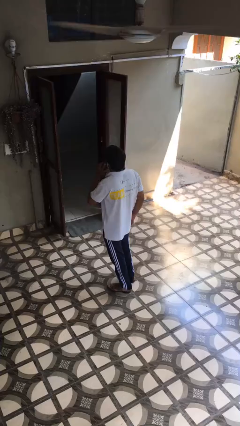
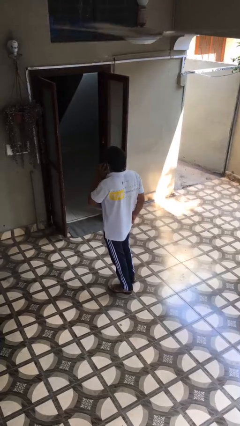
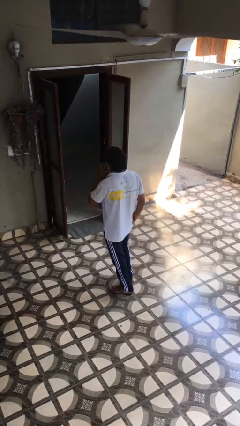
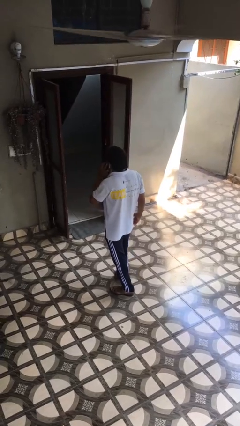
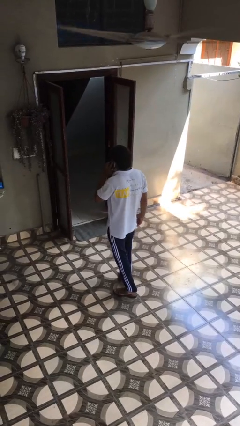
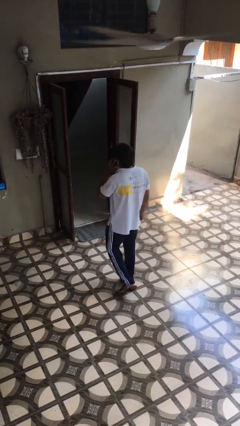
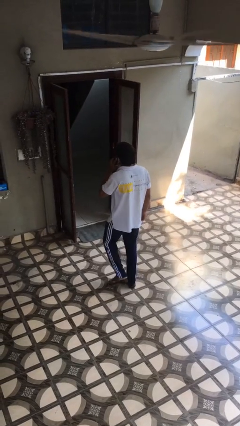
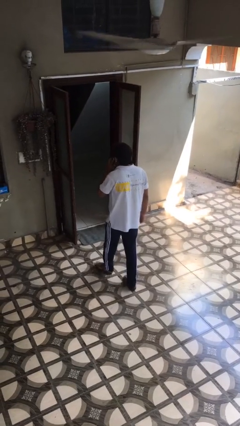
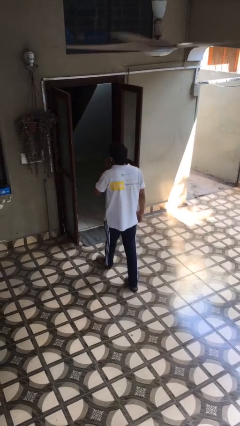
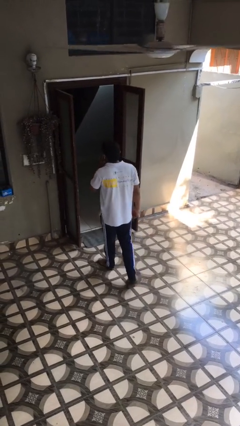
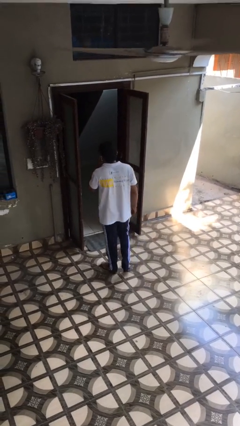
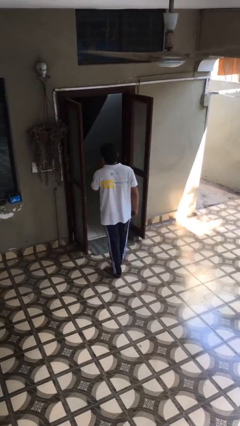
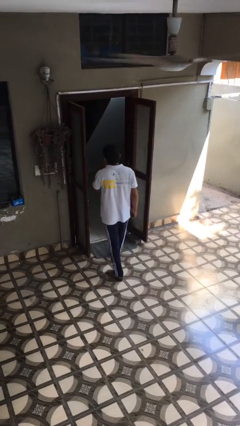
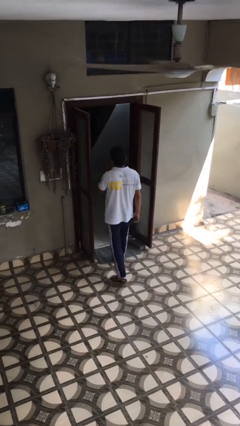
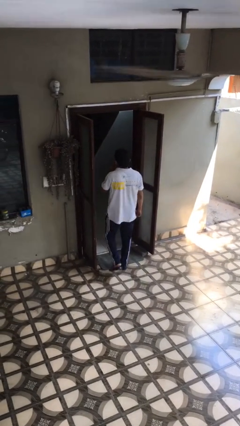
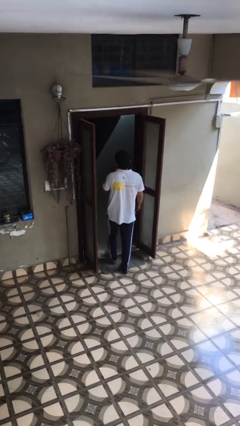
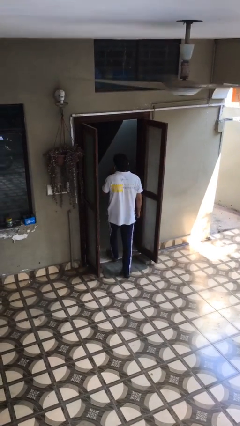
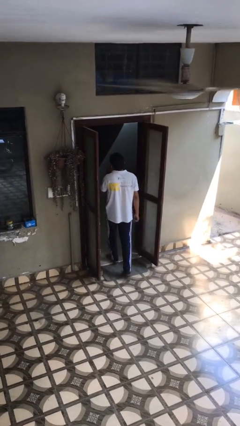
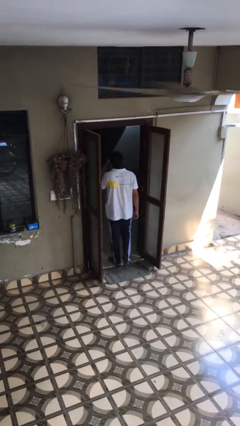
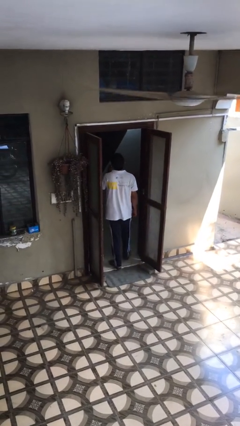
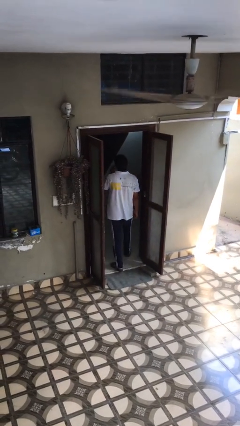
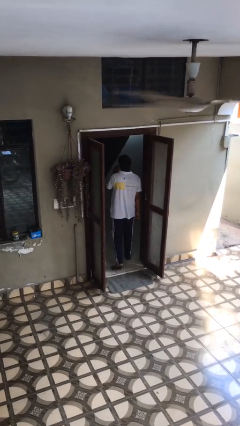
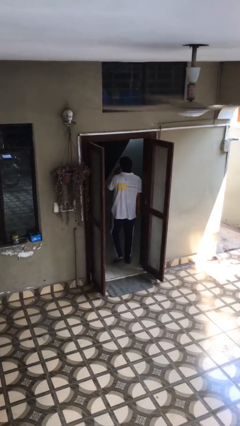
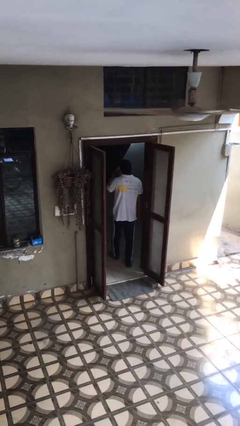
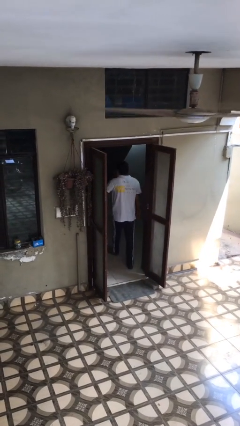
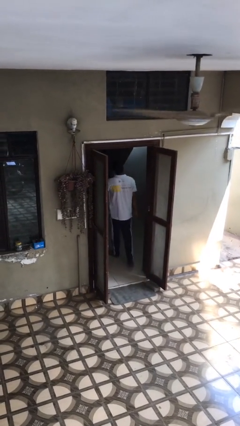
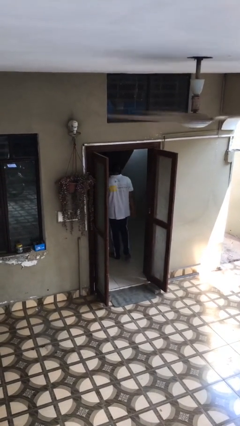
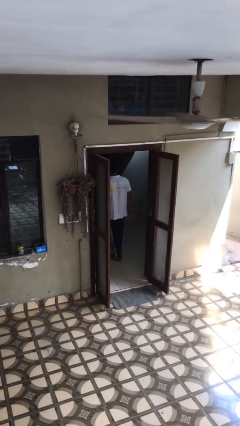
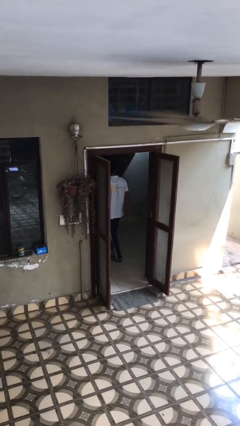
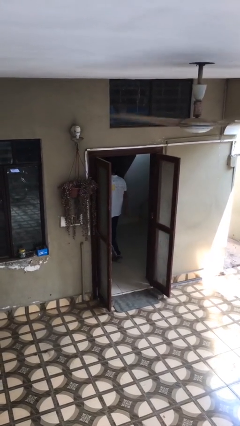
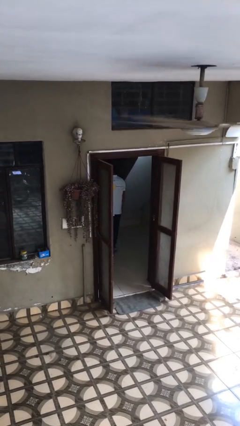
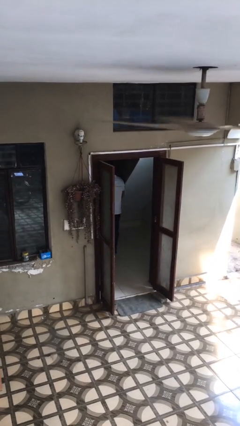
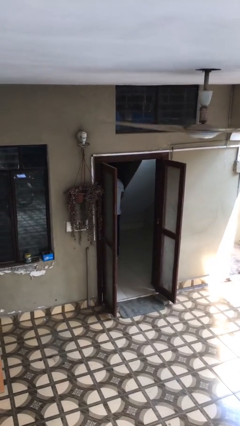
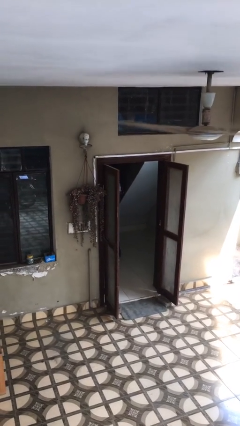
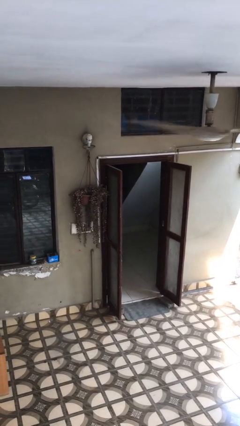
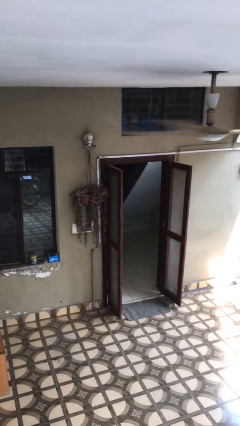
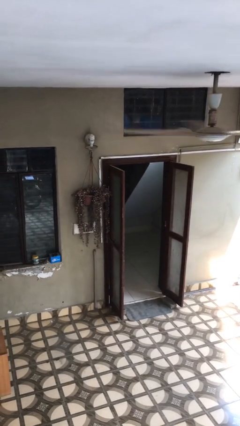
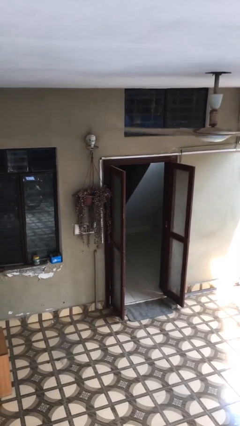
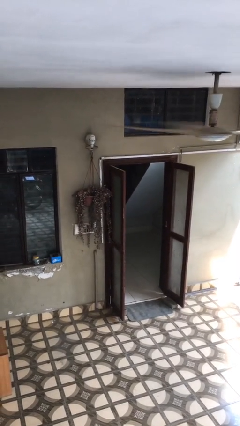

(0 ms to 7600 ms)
person exits scene through structure

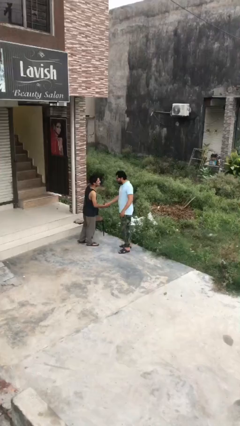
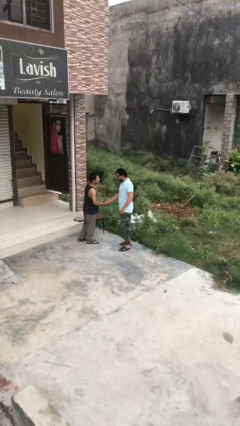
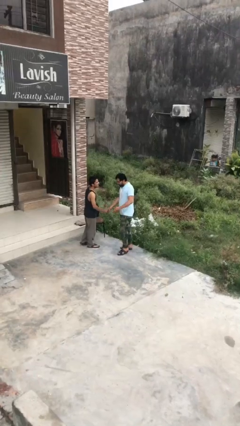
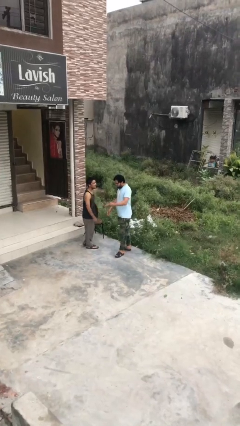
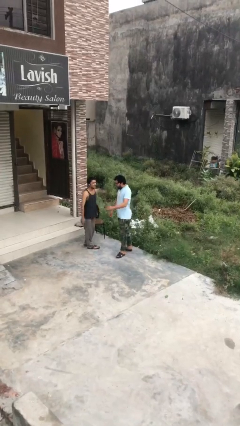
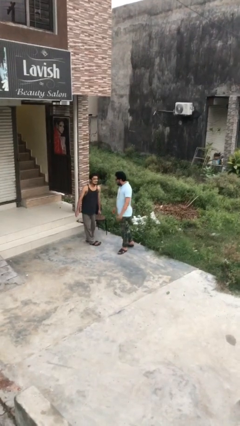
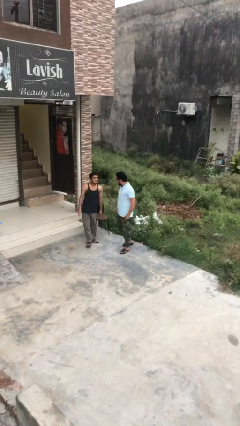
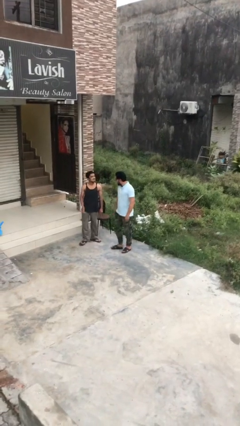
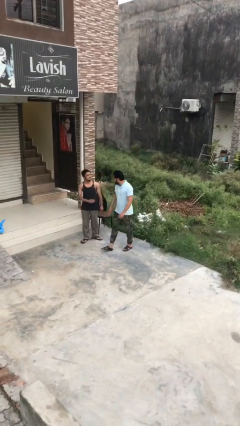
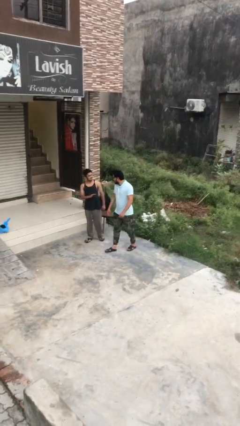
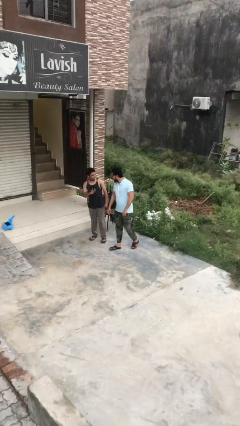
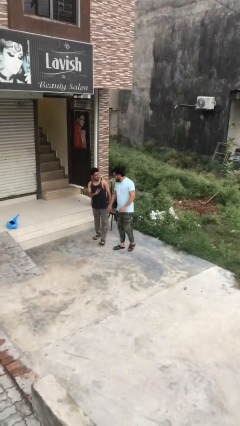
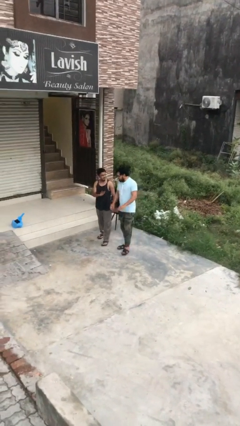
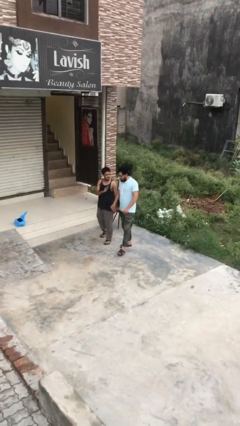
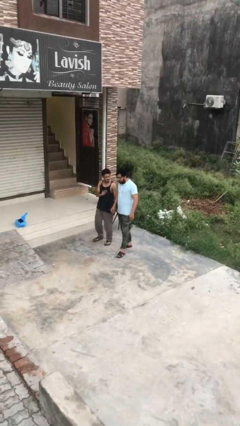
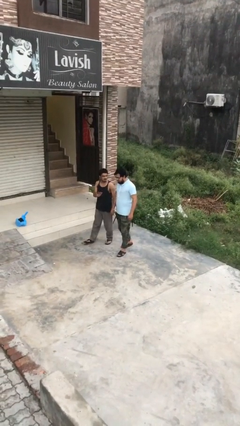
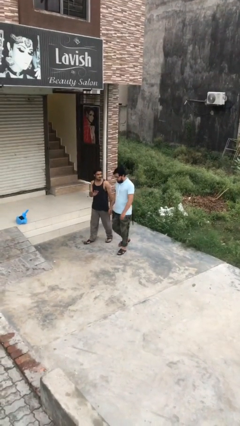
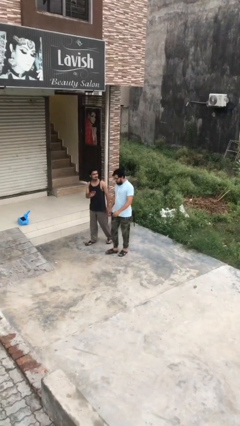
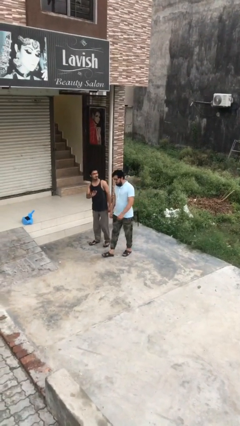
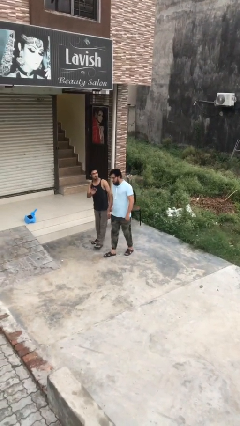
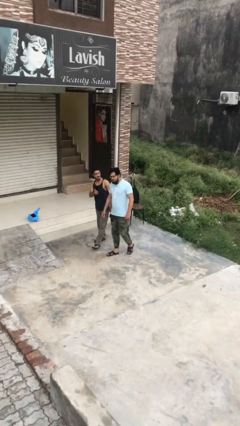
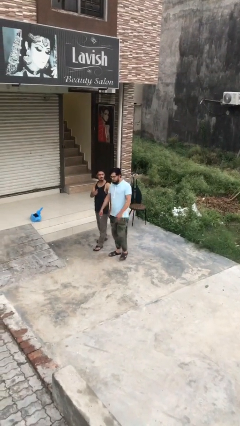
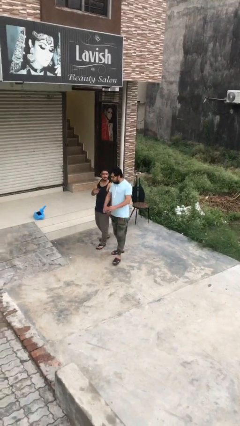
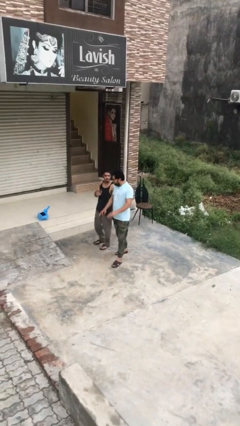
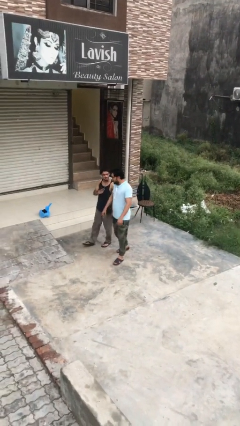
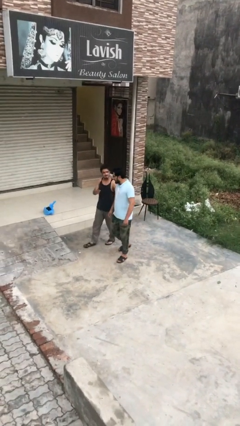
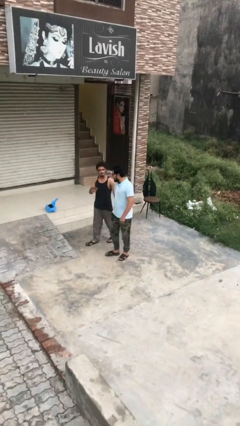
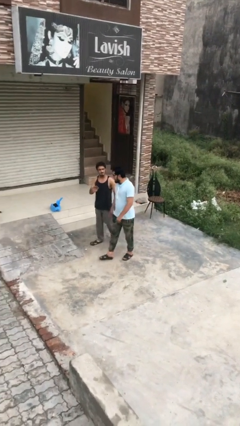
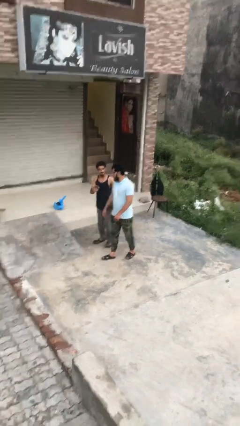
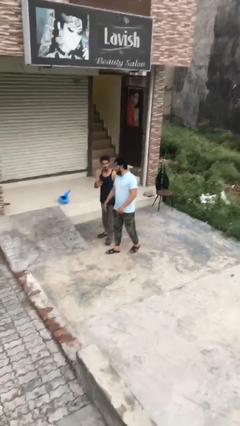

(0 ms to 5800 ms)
person talks to person

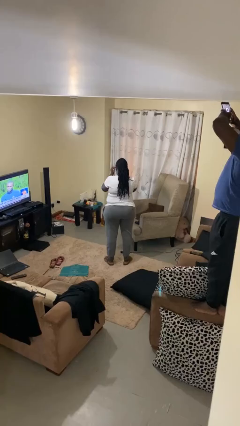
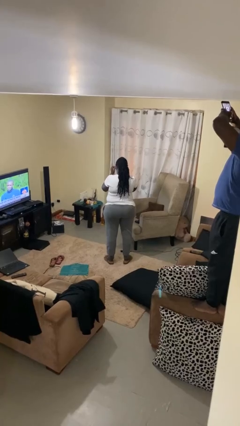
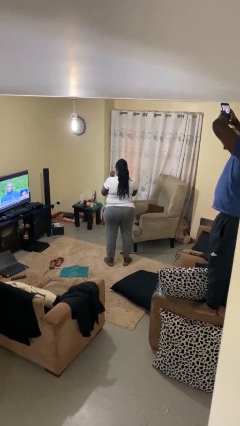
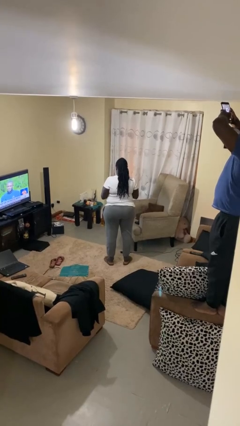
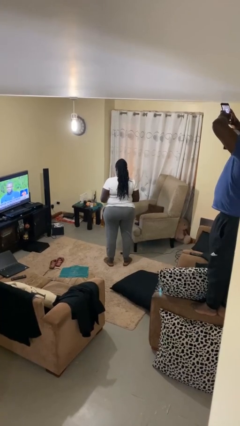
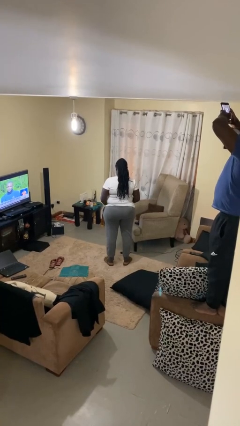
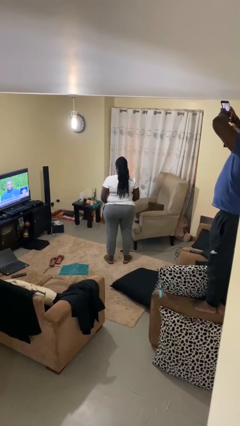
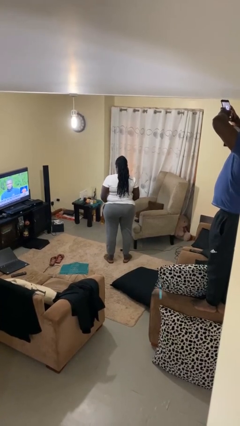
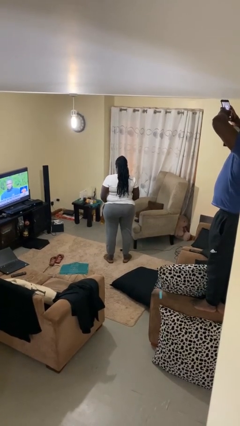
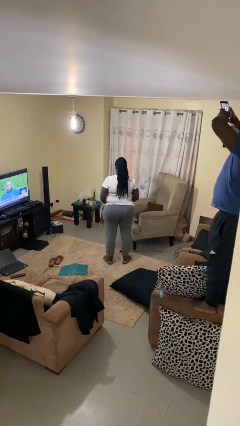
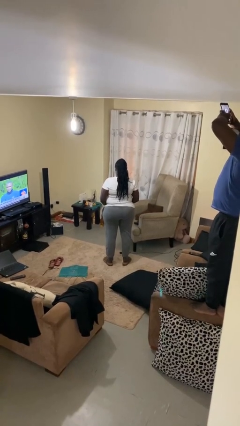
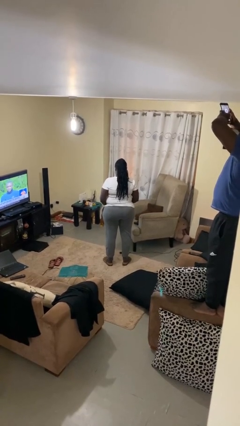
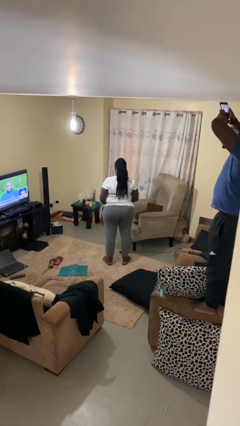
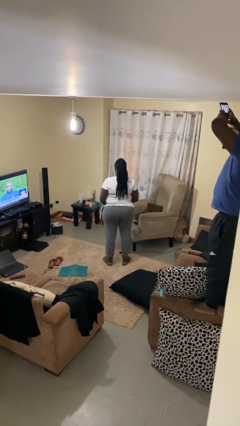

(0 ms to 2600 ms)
person takes off sunglasses

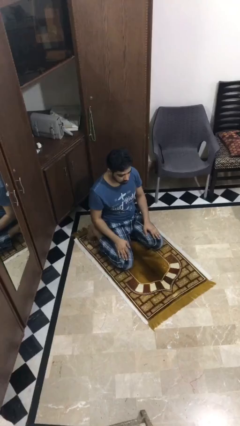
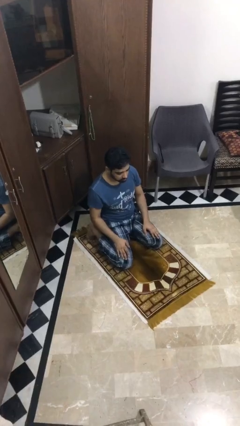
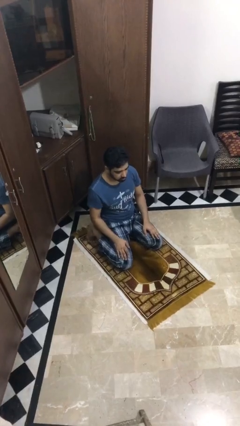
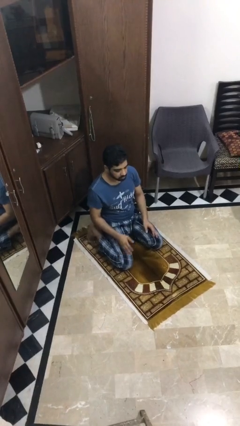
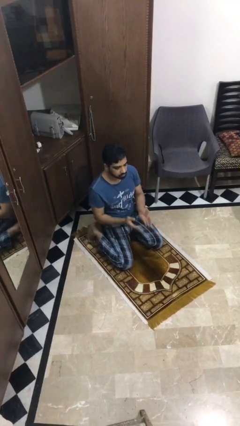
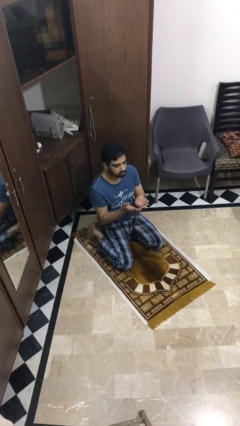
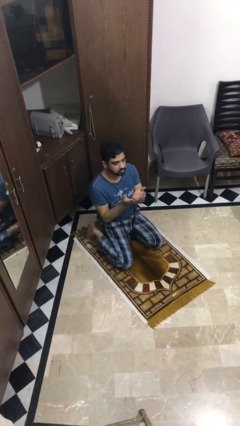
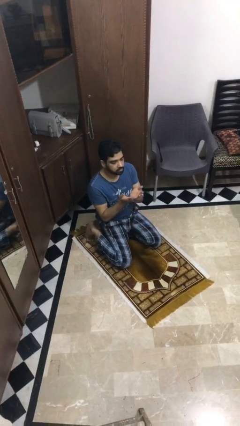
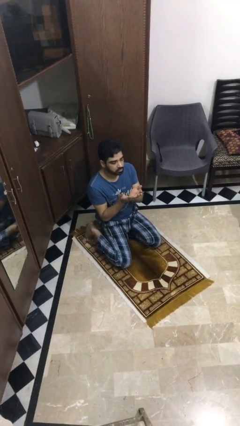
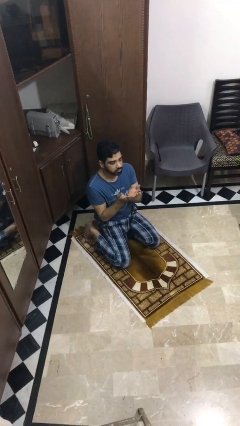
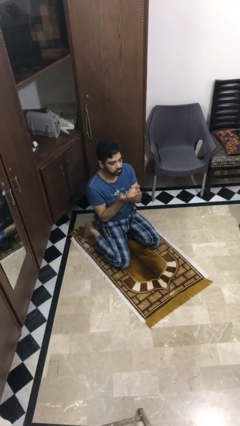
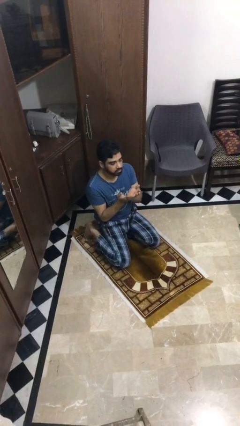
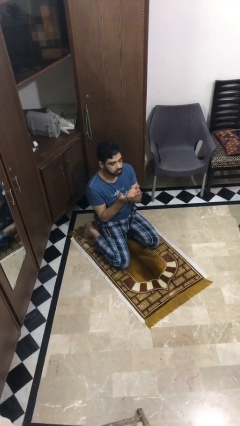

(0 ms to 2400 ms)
person prays
